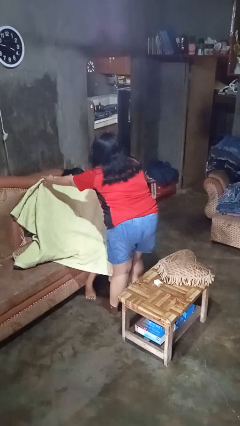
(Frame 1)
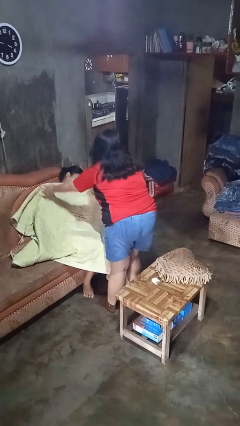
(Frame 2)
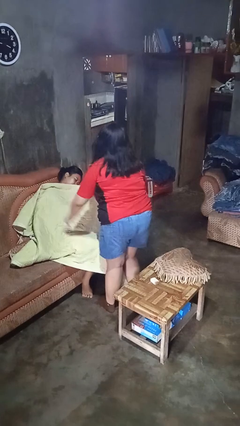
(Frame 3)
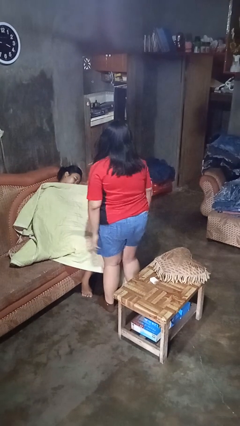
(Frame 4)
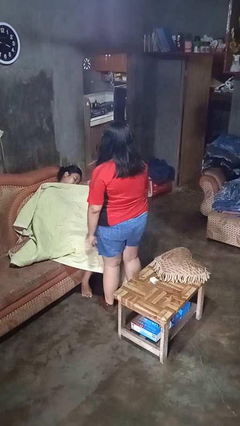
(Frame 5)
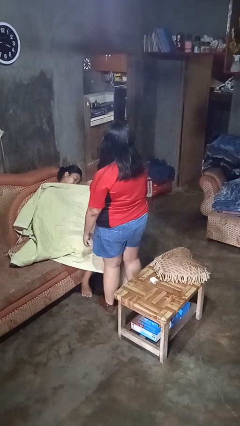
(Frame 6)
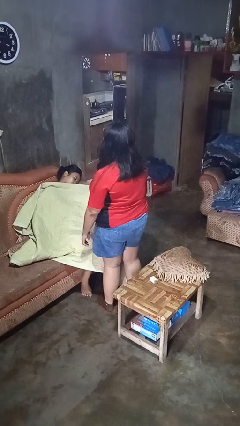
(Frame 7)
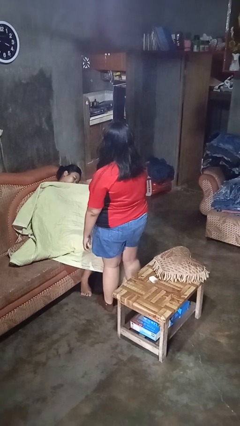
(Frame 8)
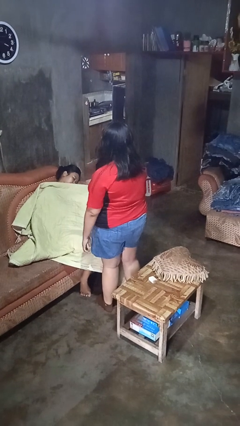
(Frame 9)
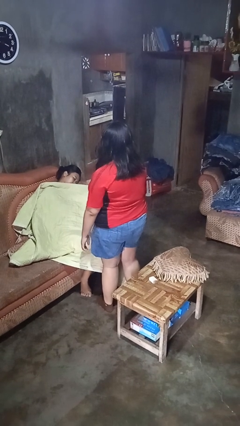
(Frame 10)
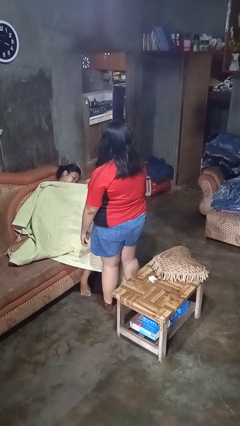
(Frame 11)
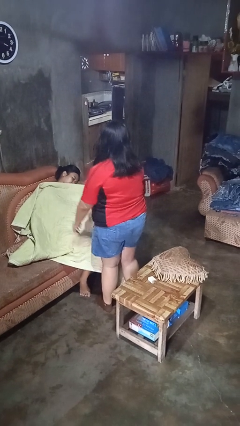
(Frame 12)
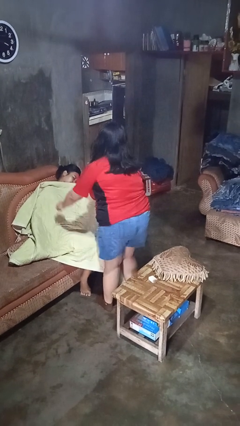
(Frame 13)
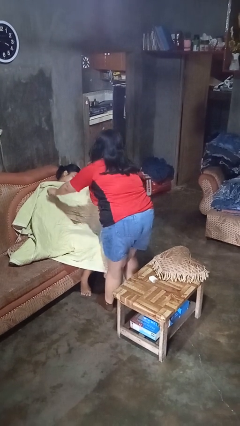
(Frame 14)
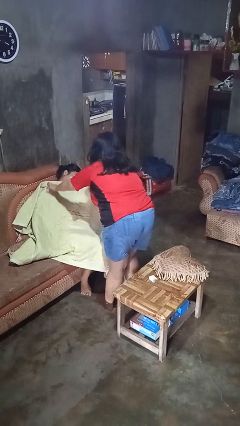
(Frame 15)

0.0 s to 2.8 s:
person covers friend with blanket

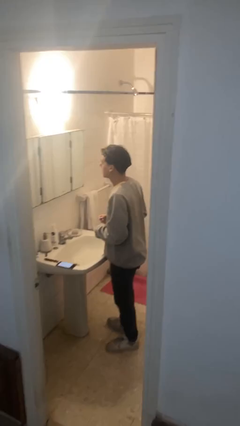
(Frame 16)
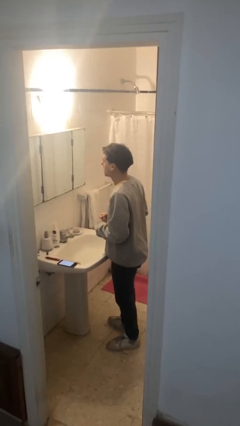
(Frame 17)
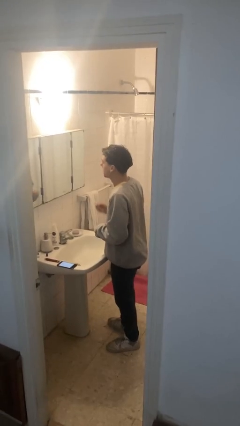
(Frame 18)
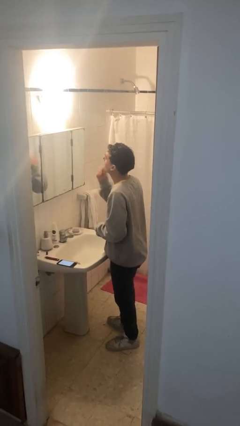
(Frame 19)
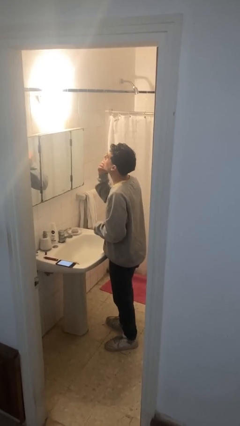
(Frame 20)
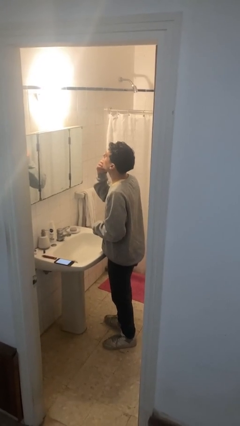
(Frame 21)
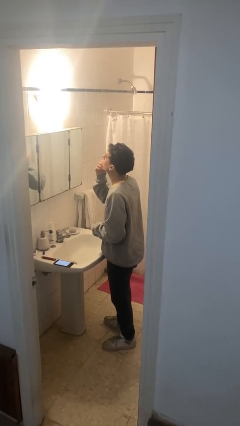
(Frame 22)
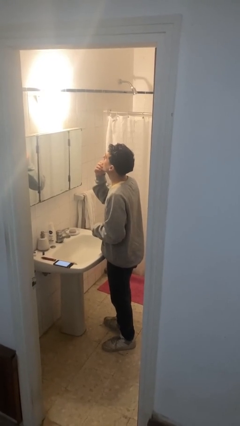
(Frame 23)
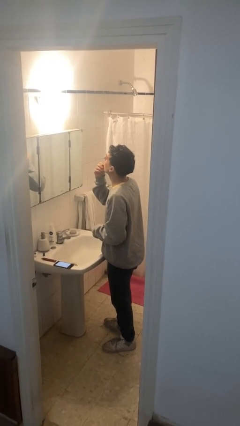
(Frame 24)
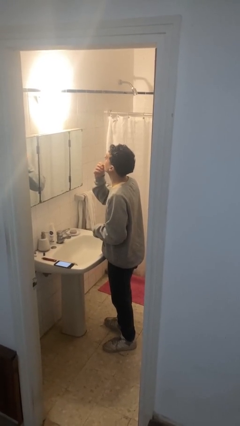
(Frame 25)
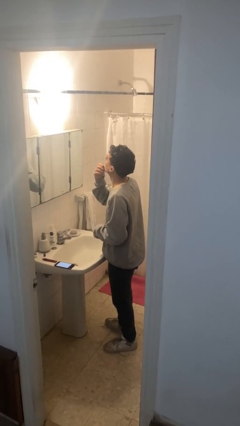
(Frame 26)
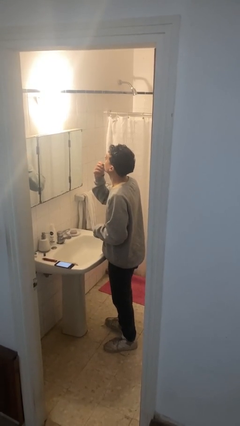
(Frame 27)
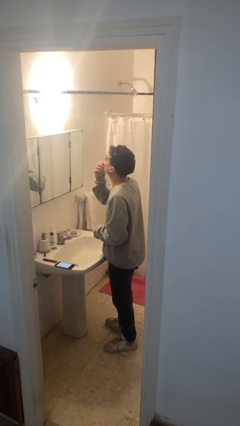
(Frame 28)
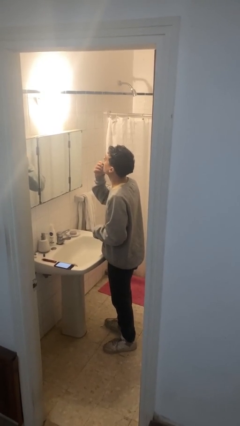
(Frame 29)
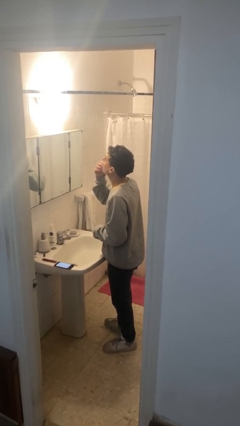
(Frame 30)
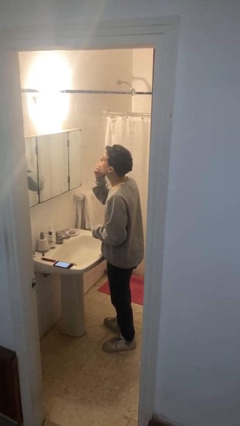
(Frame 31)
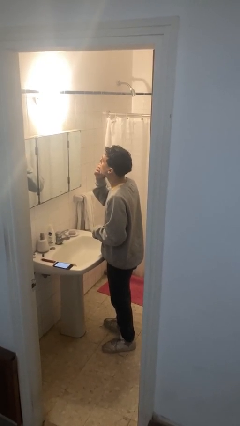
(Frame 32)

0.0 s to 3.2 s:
person applies lip makeup

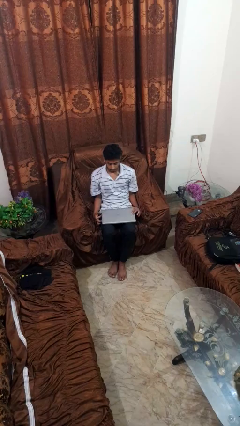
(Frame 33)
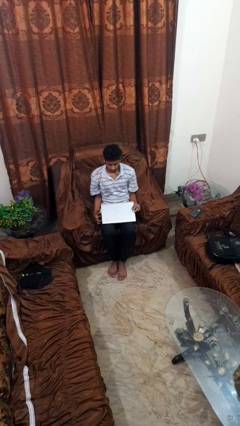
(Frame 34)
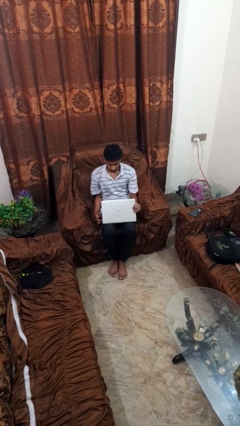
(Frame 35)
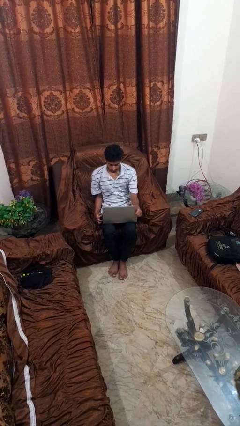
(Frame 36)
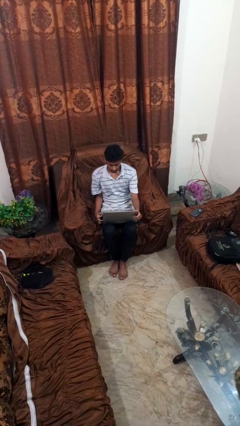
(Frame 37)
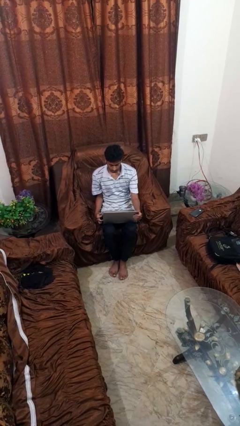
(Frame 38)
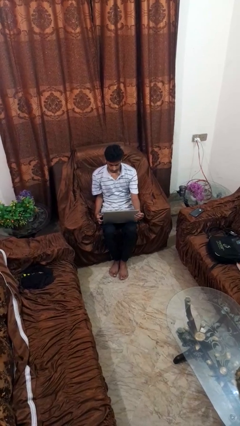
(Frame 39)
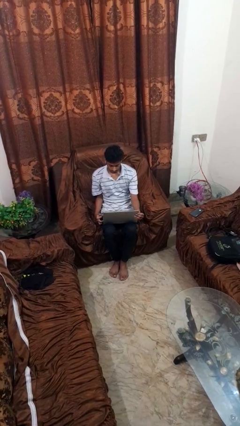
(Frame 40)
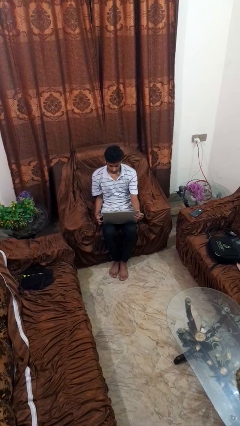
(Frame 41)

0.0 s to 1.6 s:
person opens laptop

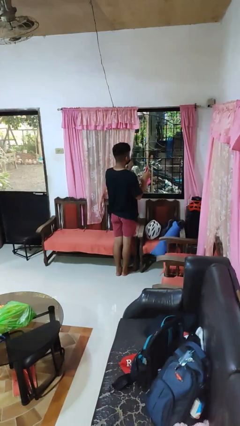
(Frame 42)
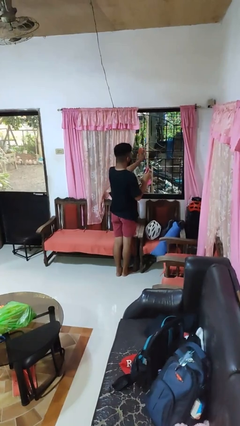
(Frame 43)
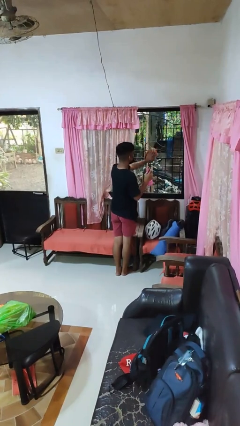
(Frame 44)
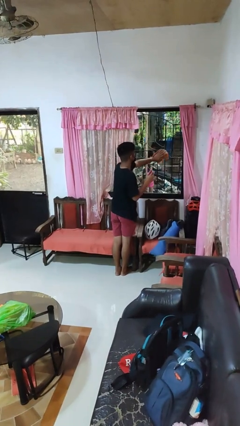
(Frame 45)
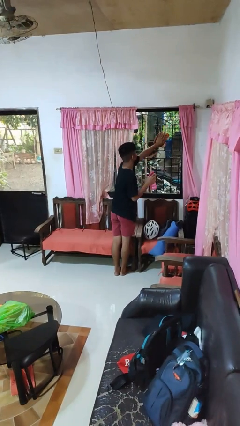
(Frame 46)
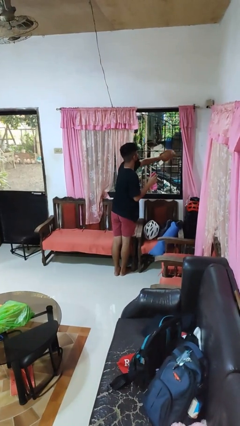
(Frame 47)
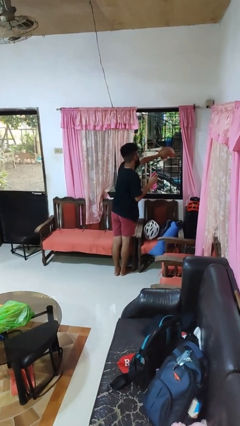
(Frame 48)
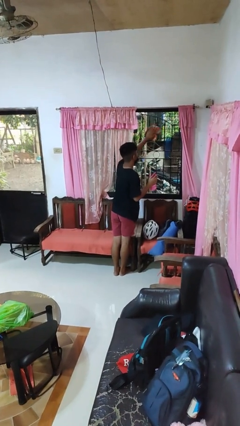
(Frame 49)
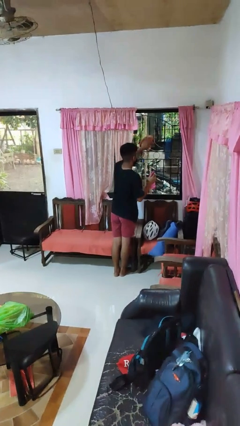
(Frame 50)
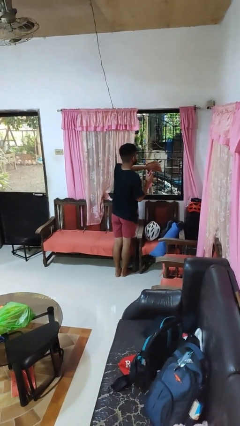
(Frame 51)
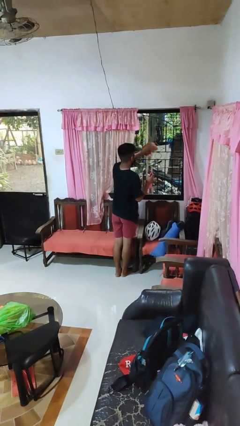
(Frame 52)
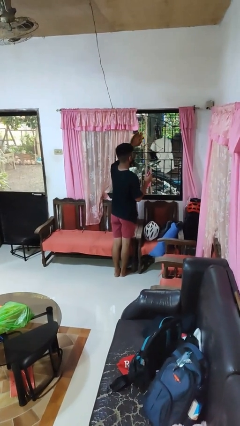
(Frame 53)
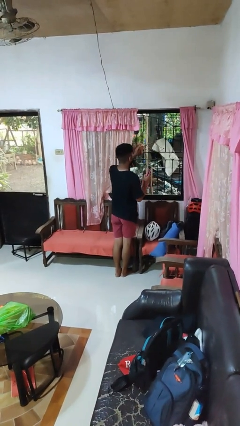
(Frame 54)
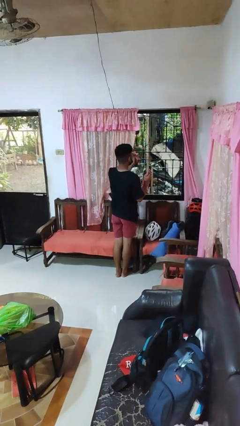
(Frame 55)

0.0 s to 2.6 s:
person washes window

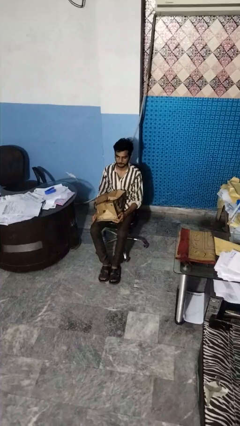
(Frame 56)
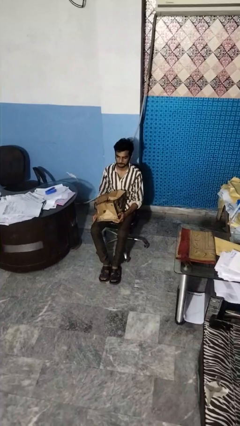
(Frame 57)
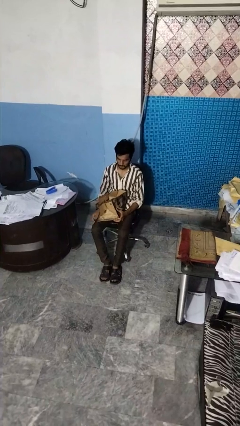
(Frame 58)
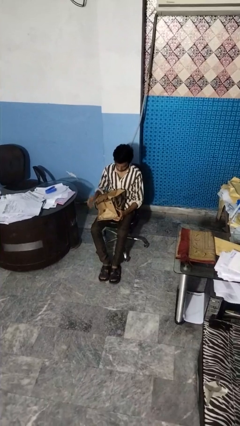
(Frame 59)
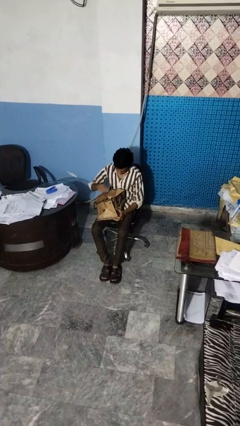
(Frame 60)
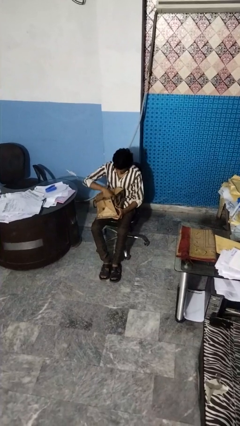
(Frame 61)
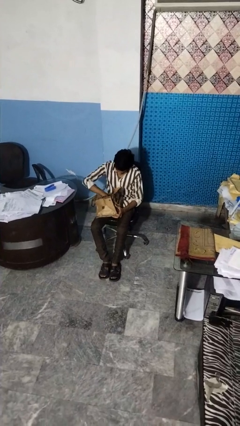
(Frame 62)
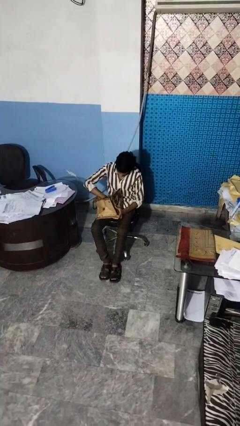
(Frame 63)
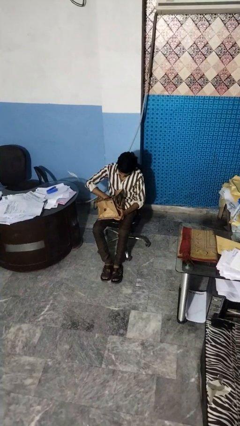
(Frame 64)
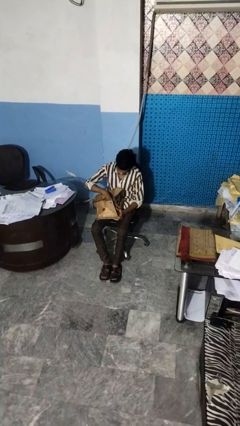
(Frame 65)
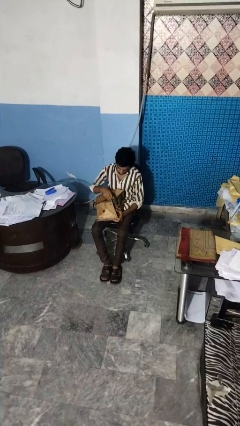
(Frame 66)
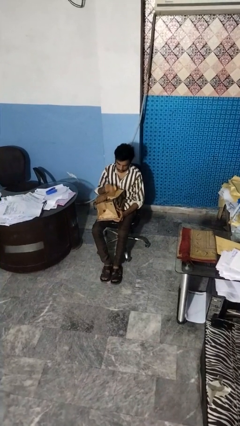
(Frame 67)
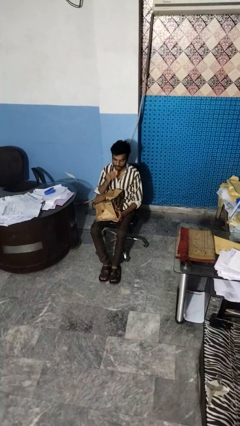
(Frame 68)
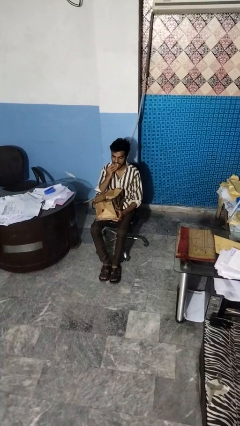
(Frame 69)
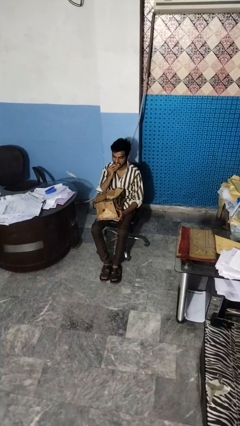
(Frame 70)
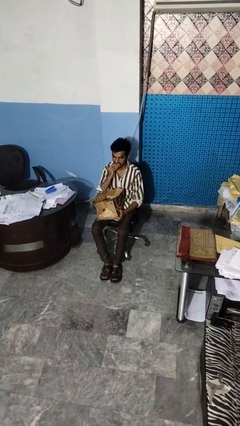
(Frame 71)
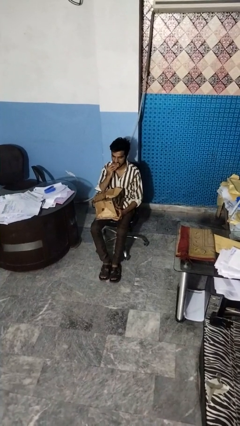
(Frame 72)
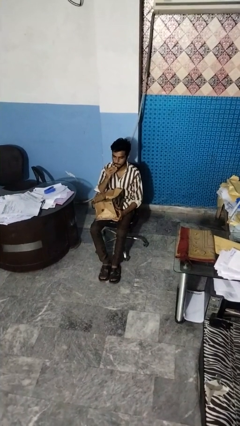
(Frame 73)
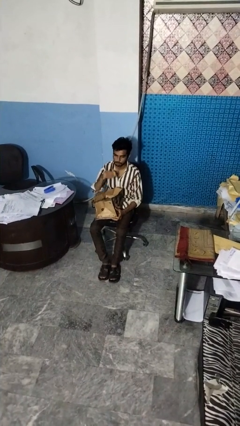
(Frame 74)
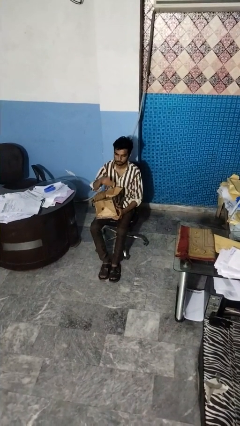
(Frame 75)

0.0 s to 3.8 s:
person eats snack from bag

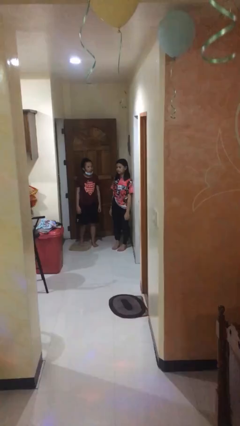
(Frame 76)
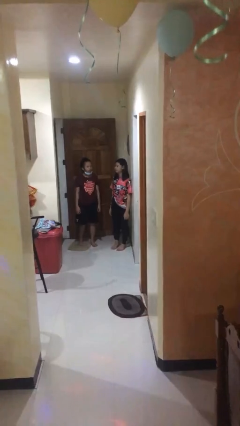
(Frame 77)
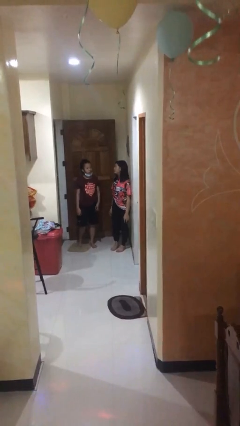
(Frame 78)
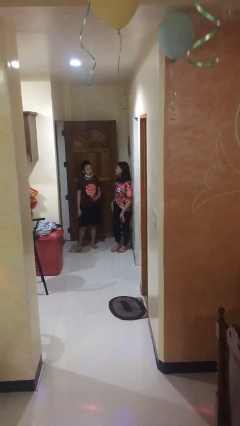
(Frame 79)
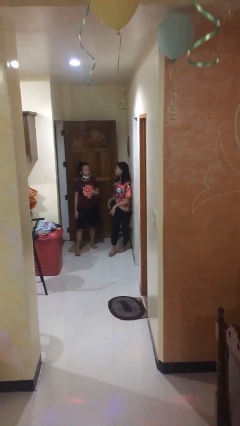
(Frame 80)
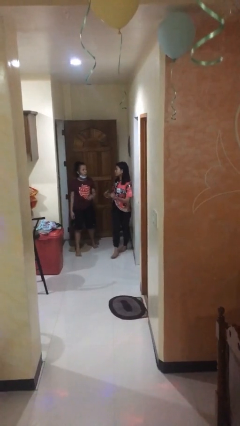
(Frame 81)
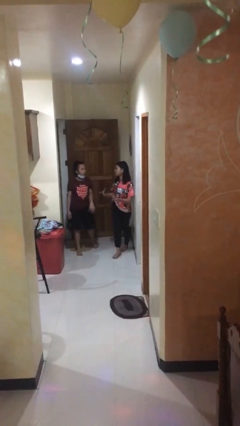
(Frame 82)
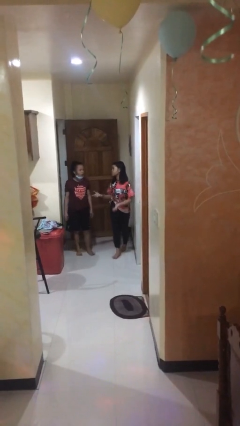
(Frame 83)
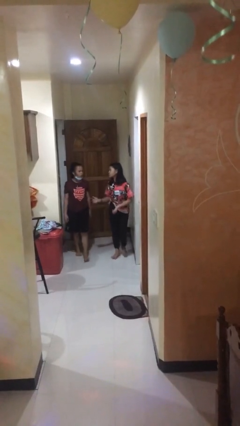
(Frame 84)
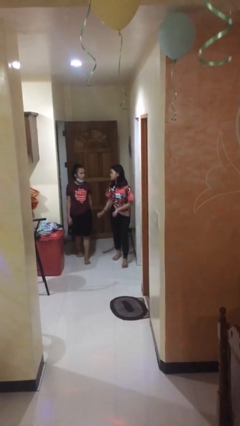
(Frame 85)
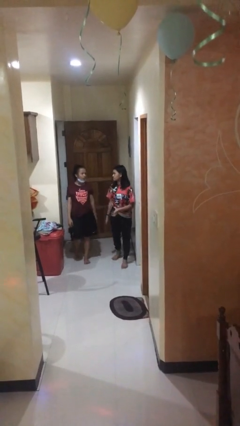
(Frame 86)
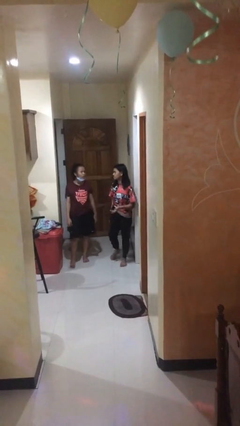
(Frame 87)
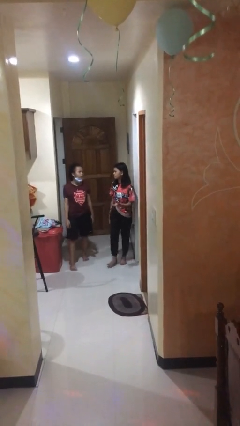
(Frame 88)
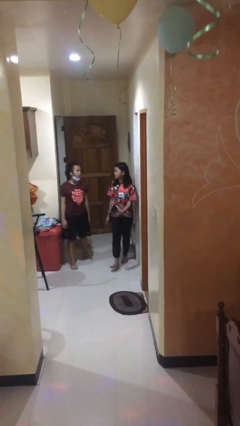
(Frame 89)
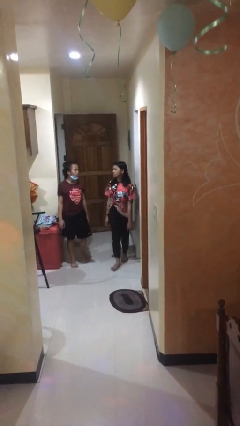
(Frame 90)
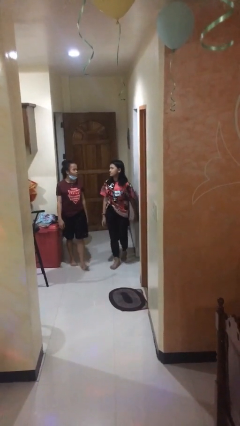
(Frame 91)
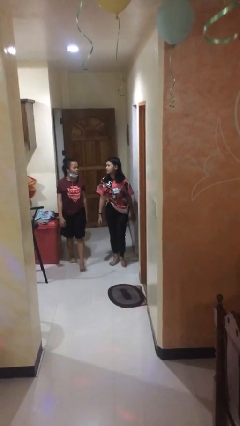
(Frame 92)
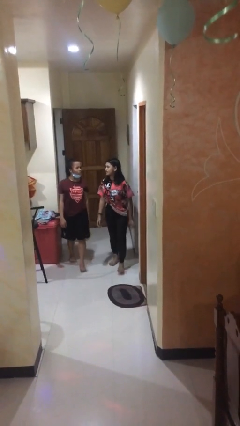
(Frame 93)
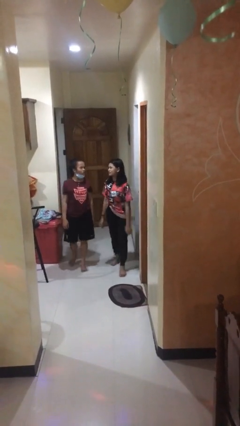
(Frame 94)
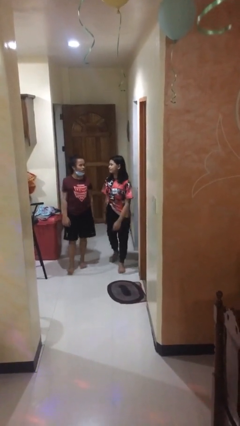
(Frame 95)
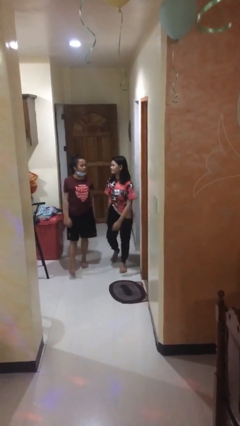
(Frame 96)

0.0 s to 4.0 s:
person talks to person
